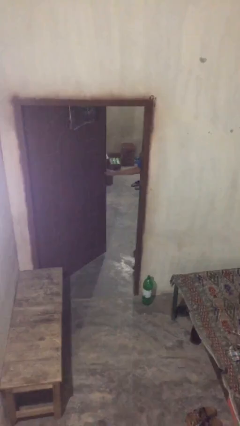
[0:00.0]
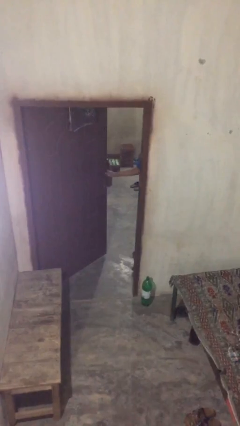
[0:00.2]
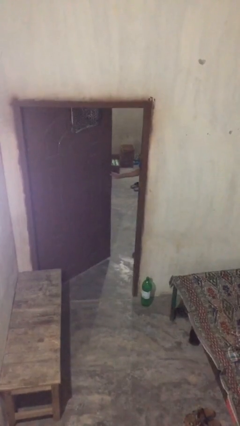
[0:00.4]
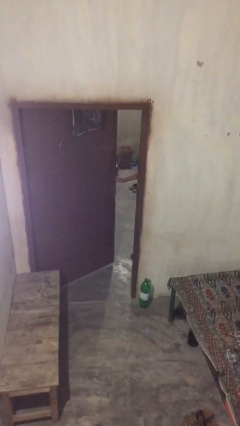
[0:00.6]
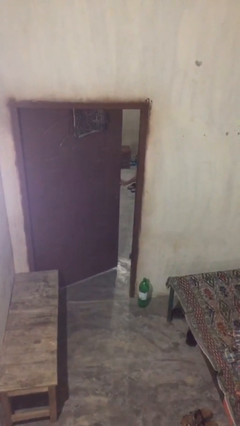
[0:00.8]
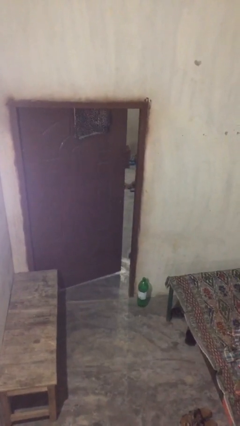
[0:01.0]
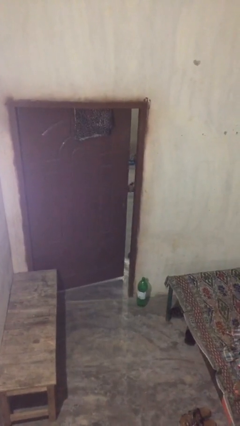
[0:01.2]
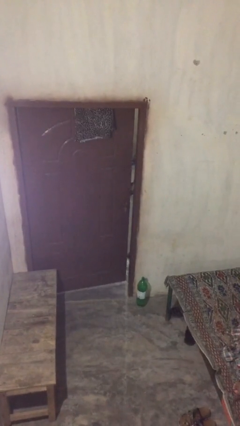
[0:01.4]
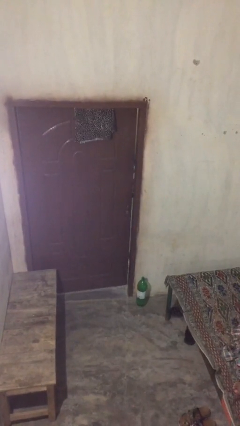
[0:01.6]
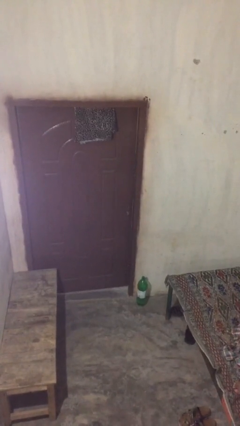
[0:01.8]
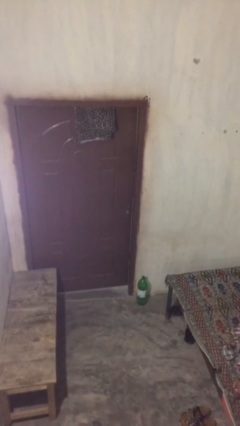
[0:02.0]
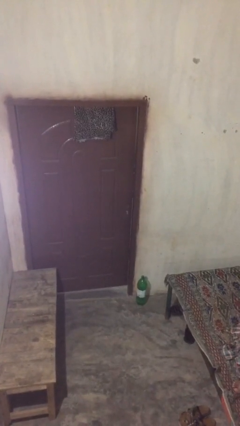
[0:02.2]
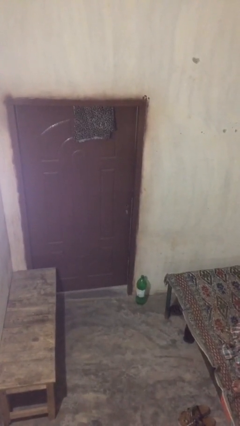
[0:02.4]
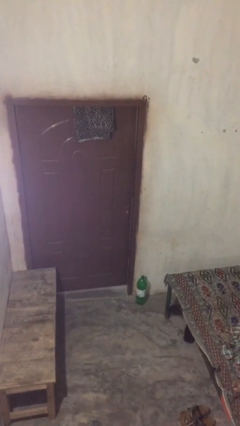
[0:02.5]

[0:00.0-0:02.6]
person closes facility door

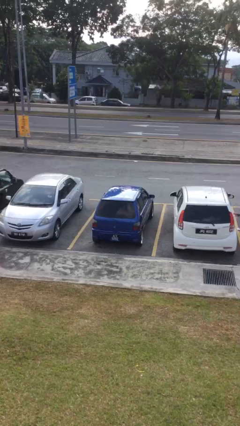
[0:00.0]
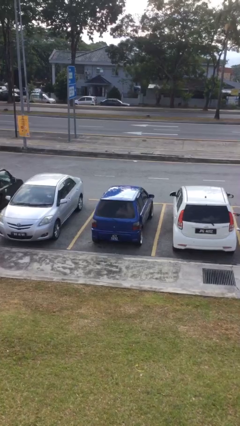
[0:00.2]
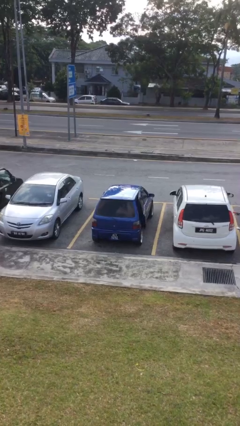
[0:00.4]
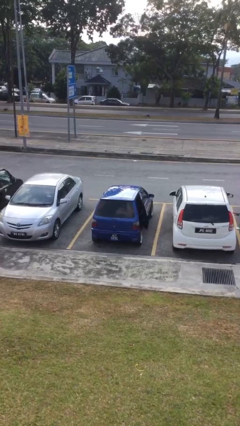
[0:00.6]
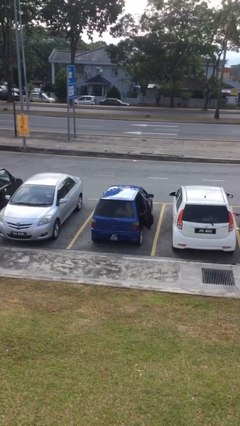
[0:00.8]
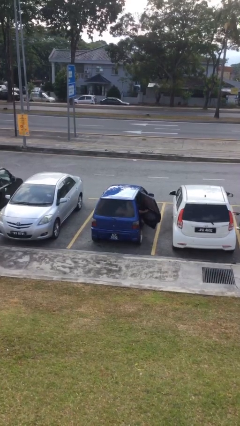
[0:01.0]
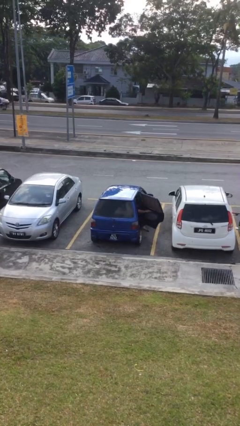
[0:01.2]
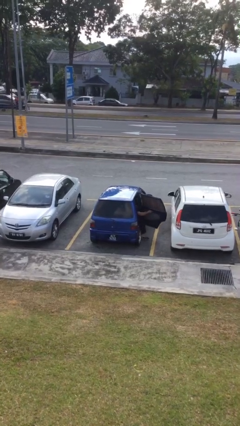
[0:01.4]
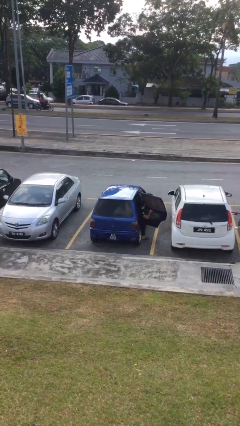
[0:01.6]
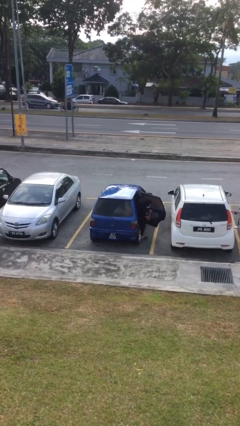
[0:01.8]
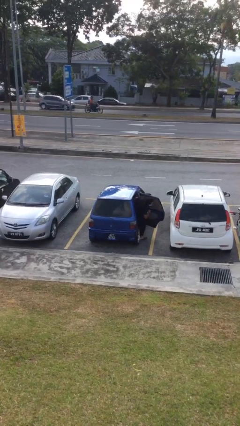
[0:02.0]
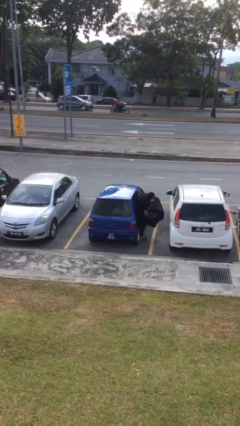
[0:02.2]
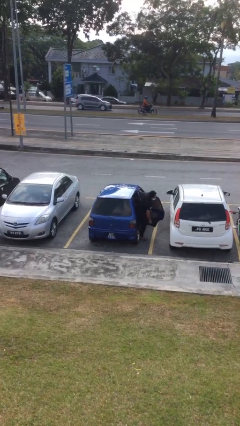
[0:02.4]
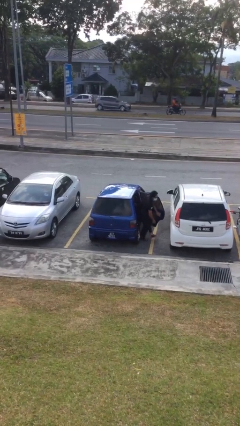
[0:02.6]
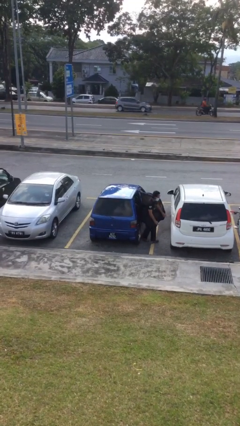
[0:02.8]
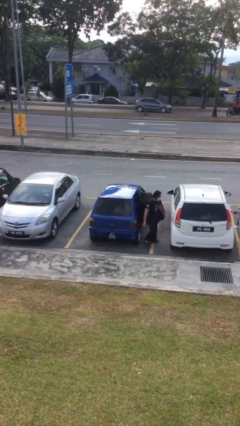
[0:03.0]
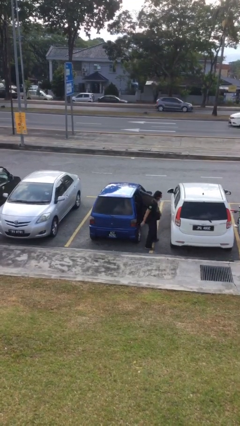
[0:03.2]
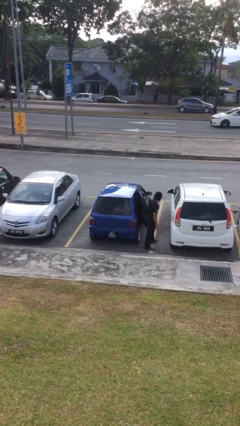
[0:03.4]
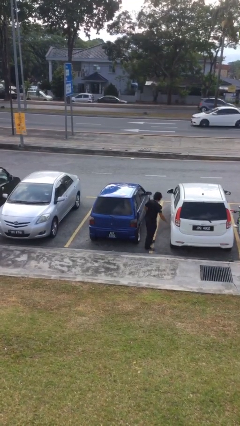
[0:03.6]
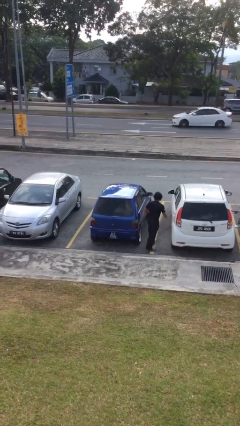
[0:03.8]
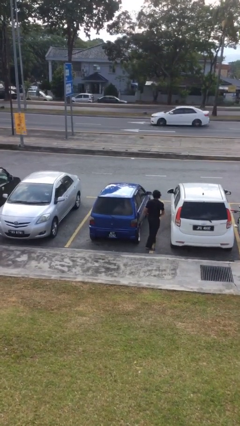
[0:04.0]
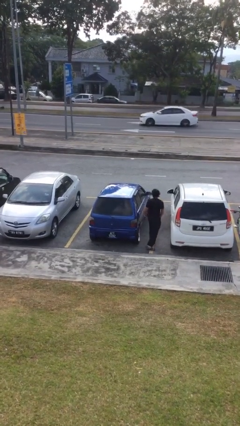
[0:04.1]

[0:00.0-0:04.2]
car drops off person

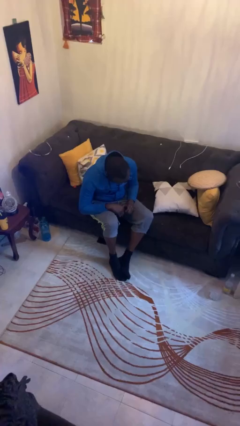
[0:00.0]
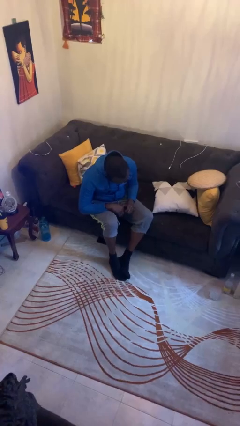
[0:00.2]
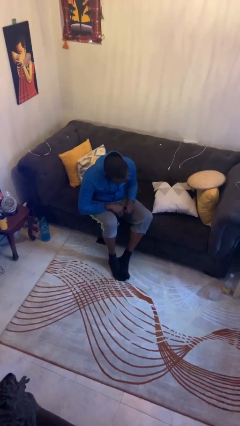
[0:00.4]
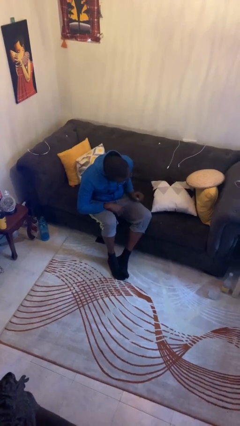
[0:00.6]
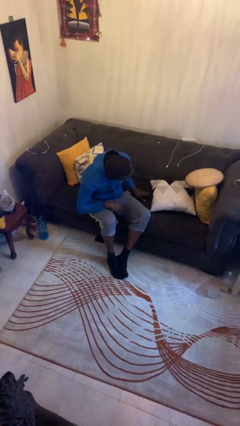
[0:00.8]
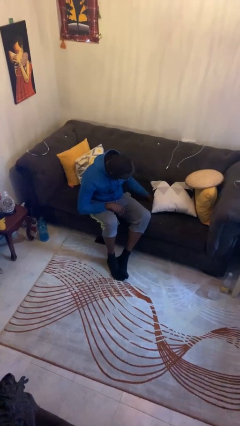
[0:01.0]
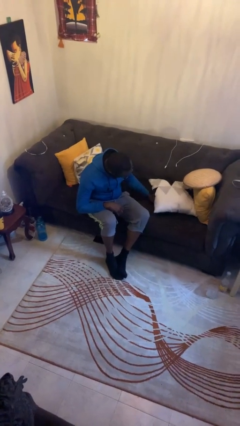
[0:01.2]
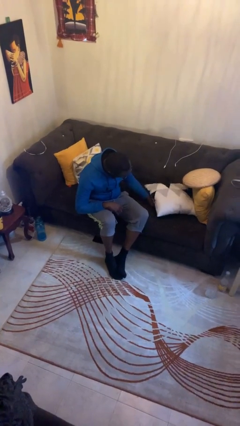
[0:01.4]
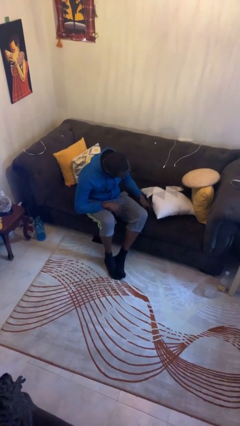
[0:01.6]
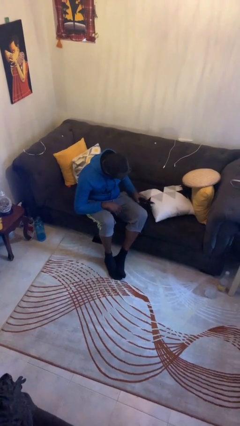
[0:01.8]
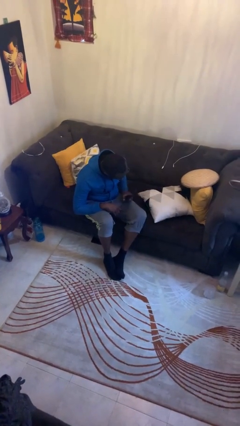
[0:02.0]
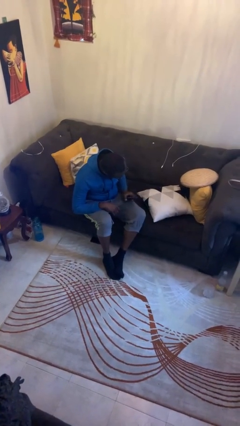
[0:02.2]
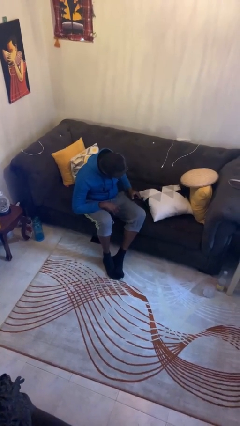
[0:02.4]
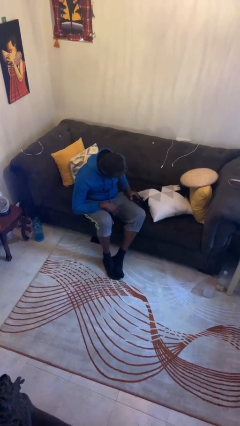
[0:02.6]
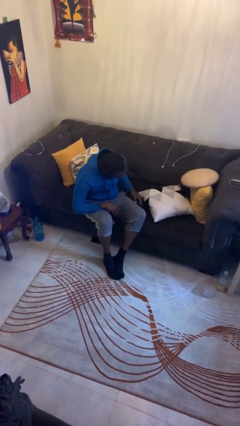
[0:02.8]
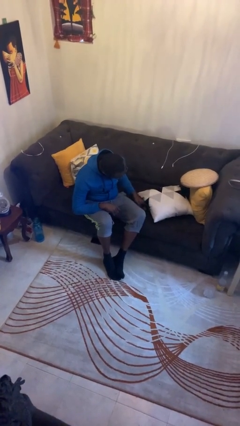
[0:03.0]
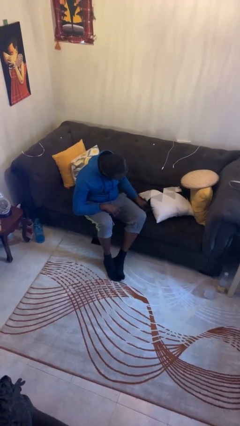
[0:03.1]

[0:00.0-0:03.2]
person searches in couch

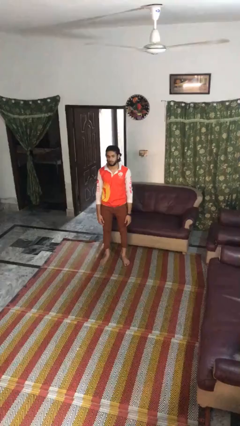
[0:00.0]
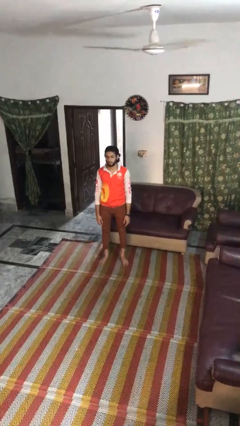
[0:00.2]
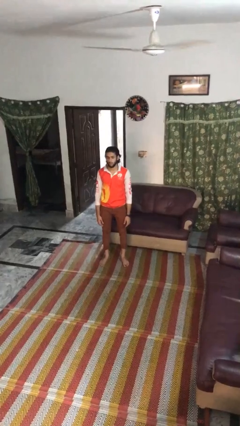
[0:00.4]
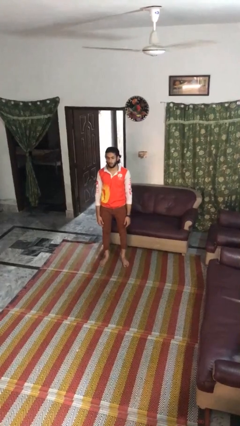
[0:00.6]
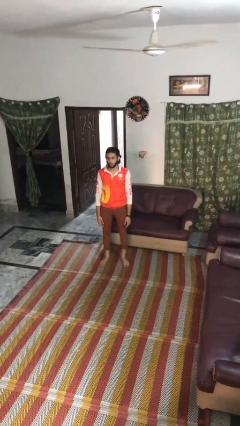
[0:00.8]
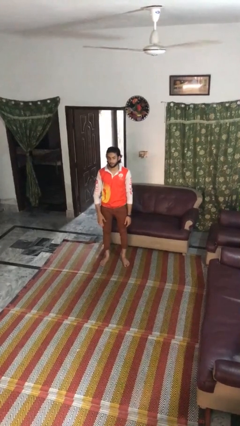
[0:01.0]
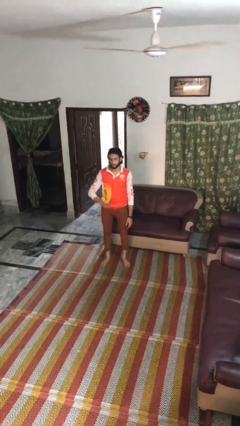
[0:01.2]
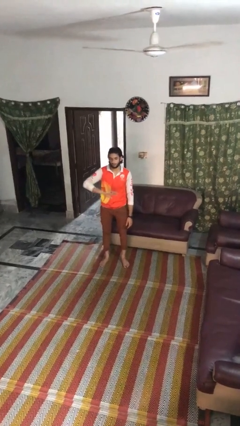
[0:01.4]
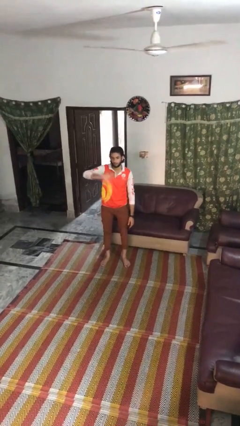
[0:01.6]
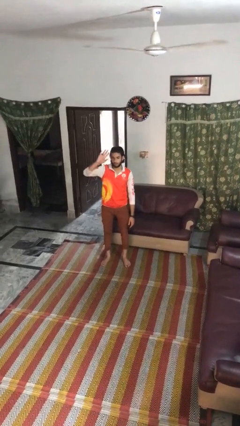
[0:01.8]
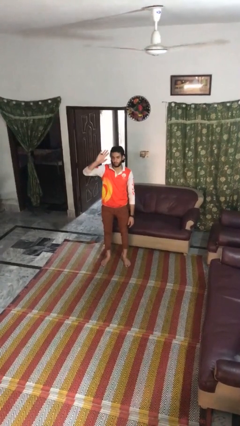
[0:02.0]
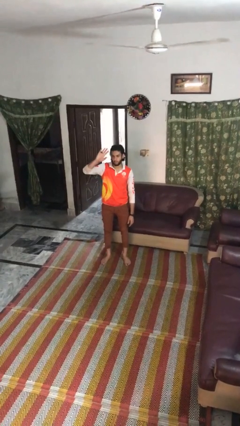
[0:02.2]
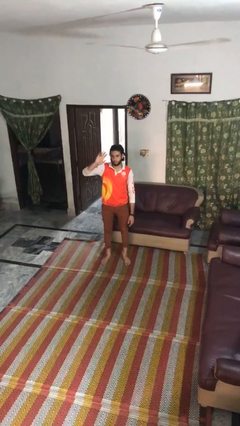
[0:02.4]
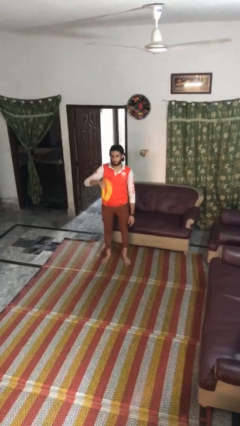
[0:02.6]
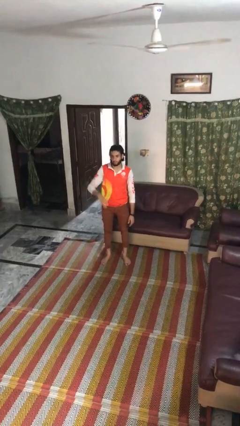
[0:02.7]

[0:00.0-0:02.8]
person gestures swipe up

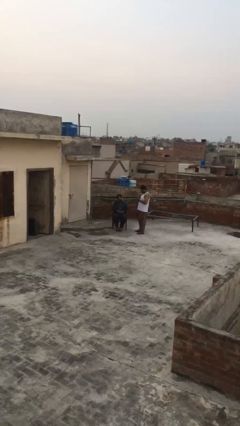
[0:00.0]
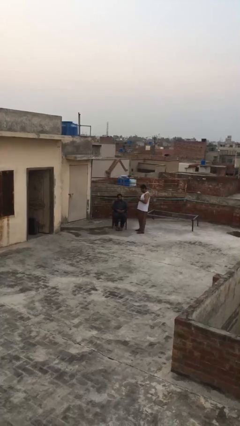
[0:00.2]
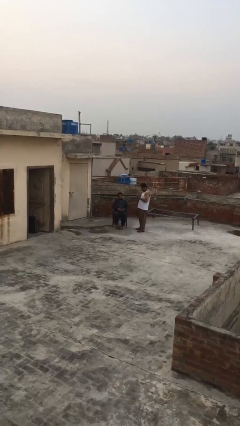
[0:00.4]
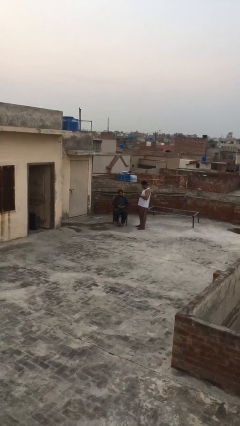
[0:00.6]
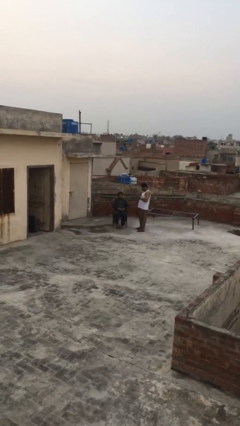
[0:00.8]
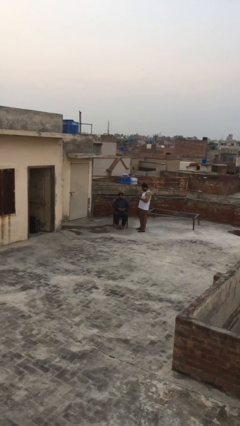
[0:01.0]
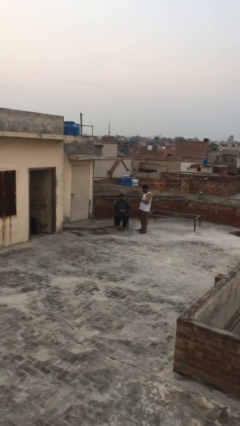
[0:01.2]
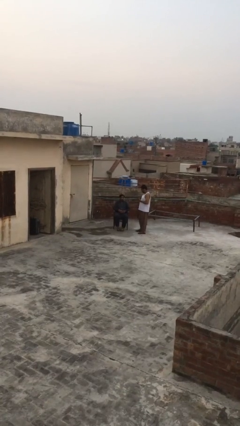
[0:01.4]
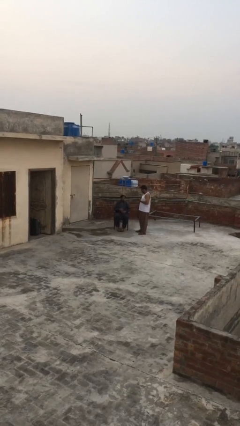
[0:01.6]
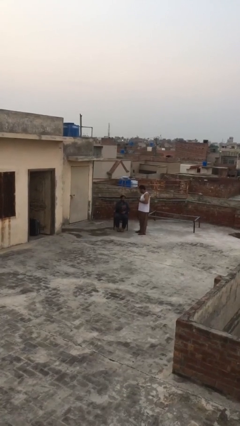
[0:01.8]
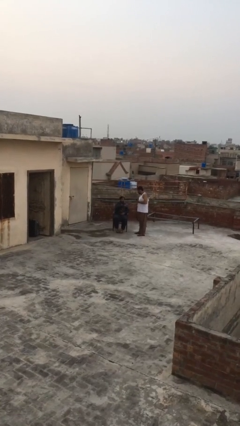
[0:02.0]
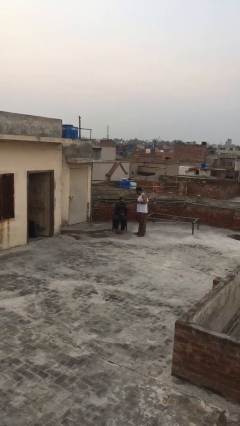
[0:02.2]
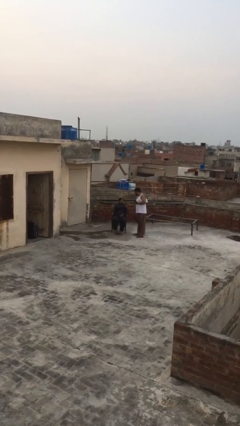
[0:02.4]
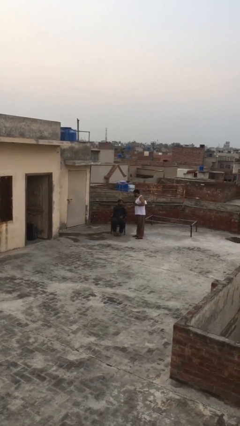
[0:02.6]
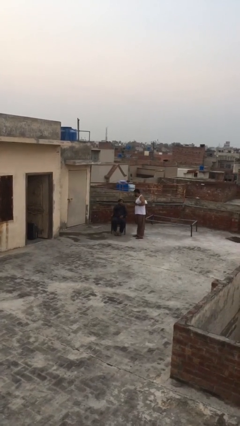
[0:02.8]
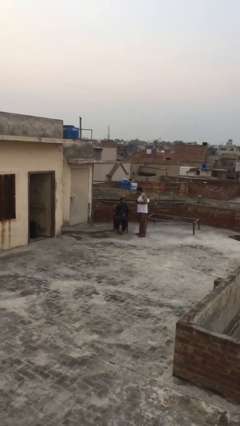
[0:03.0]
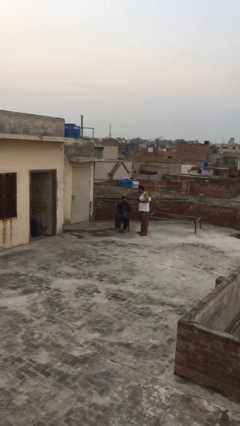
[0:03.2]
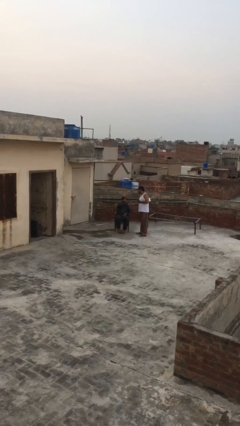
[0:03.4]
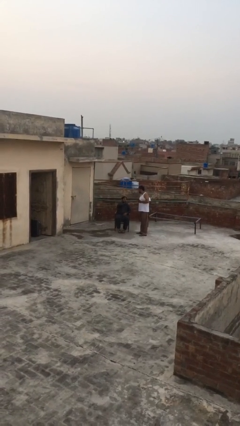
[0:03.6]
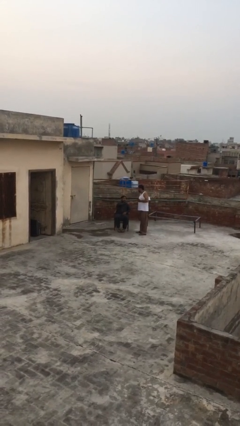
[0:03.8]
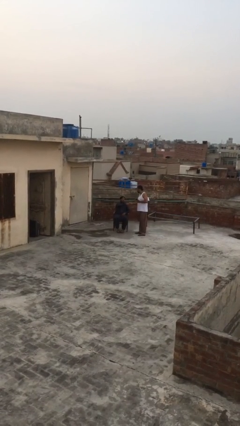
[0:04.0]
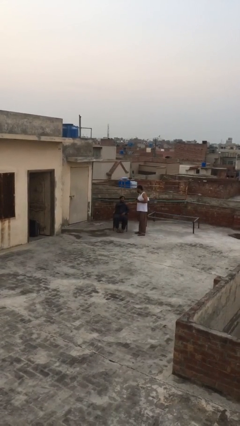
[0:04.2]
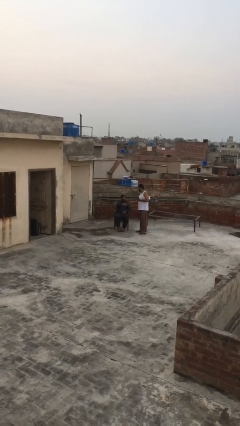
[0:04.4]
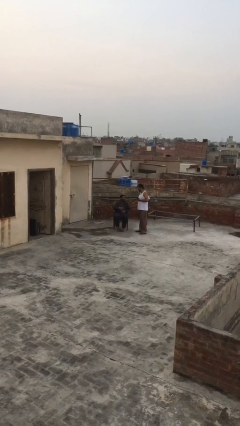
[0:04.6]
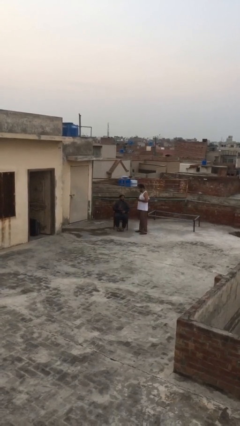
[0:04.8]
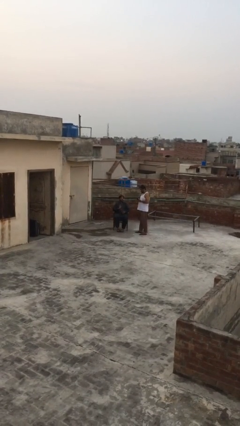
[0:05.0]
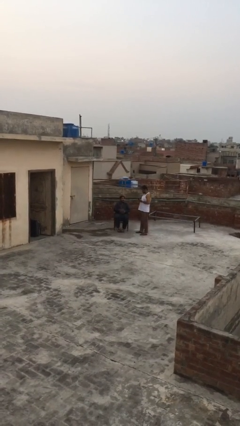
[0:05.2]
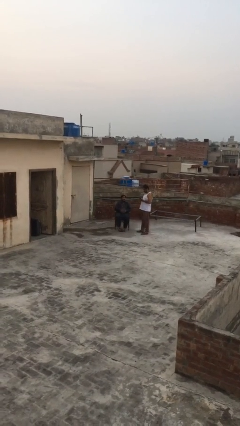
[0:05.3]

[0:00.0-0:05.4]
person shakes hand
